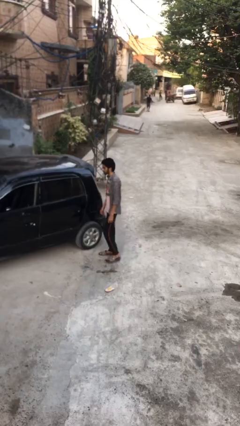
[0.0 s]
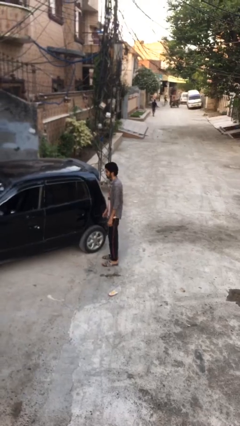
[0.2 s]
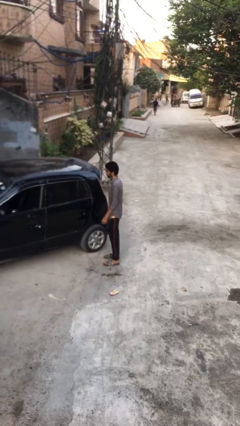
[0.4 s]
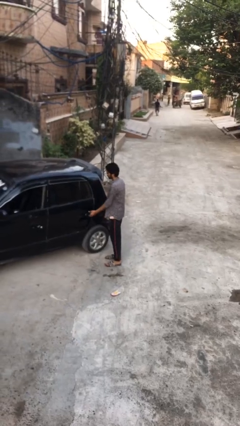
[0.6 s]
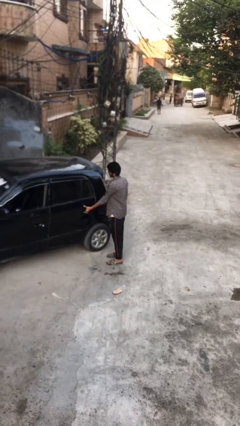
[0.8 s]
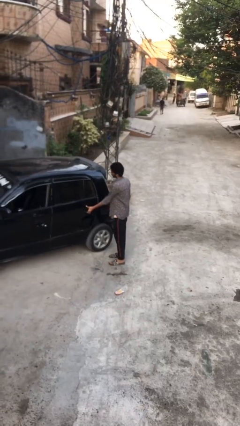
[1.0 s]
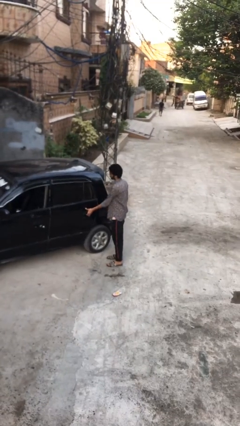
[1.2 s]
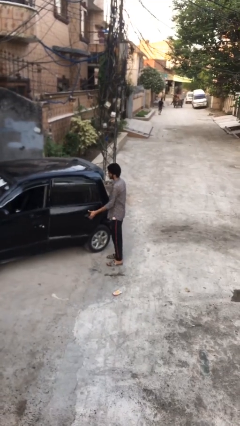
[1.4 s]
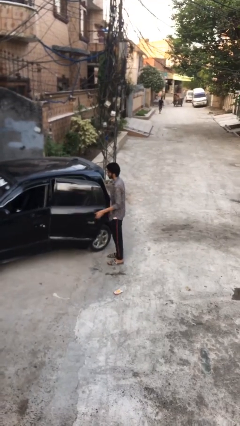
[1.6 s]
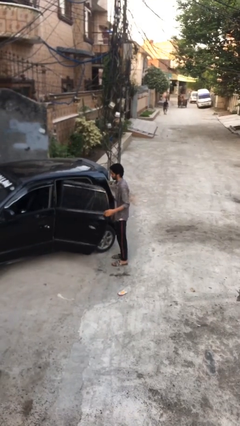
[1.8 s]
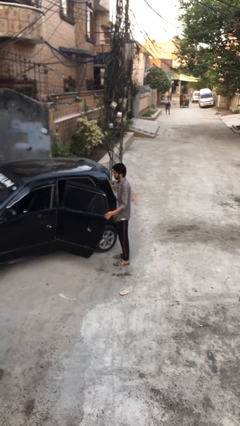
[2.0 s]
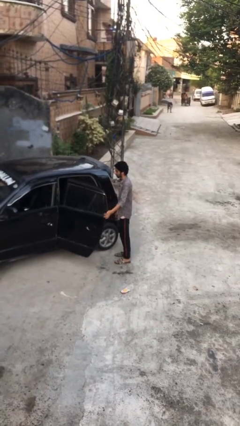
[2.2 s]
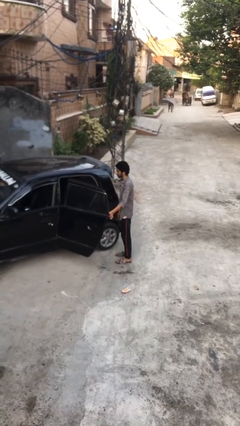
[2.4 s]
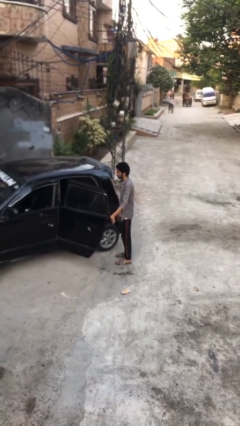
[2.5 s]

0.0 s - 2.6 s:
person opens car door

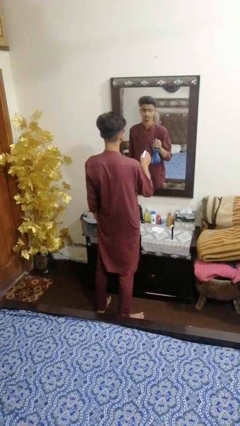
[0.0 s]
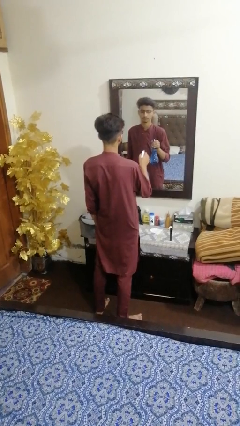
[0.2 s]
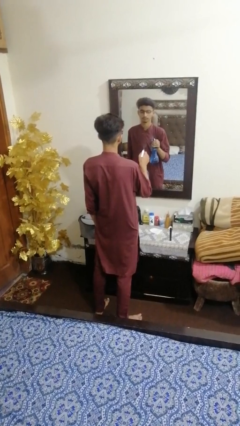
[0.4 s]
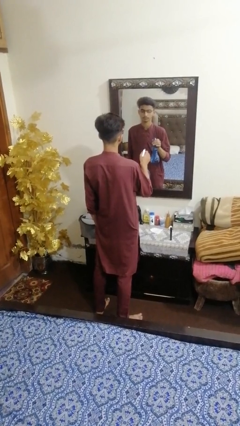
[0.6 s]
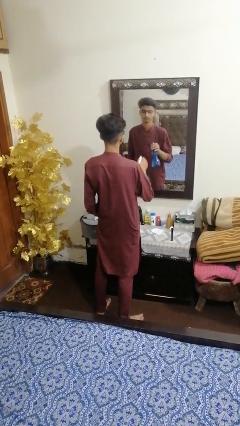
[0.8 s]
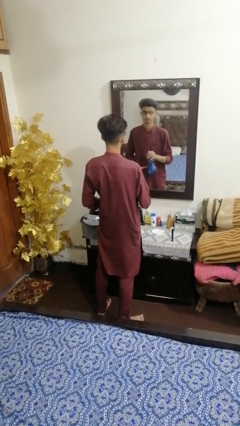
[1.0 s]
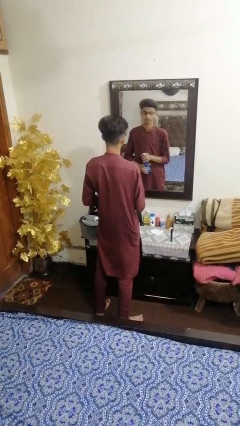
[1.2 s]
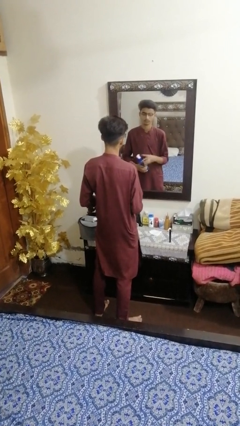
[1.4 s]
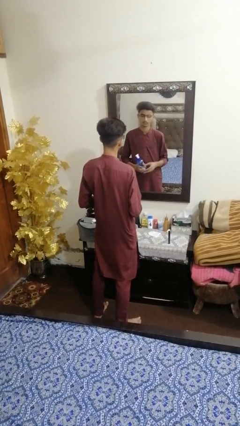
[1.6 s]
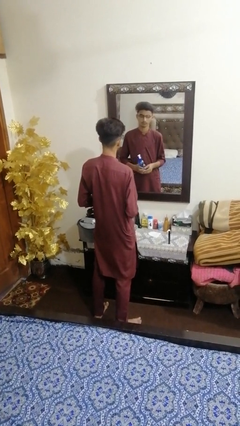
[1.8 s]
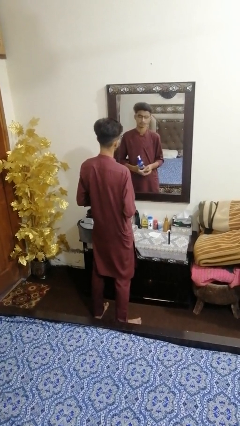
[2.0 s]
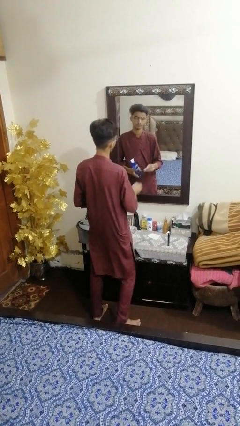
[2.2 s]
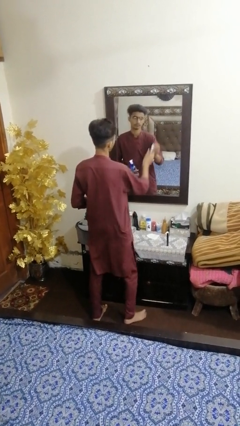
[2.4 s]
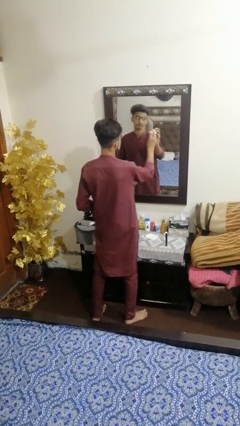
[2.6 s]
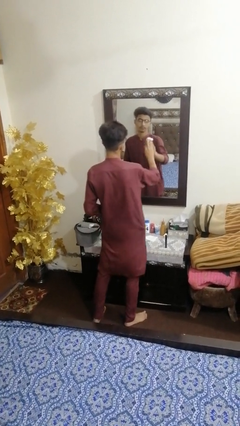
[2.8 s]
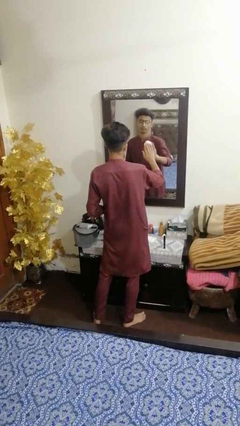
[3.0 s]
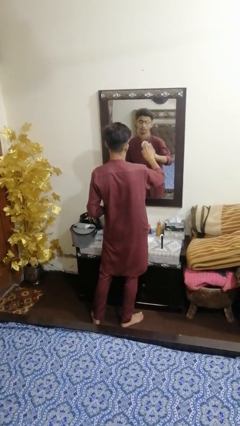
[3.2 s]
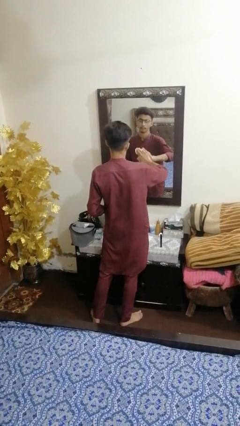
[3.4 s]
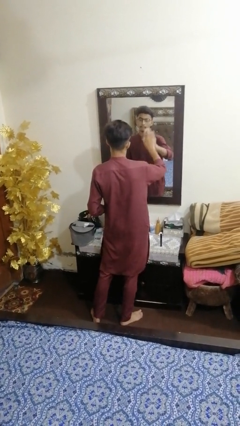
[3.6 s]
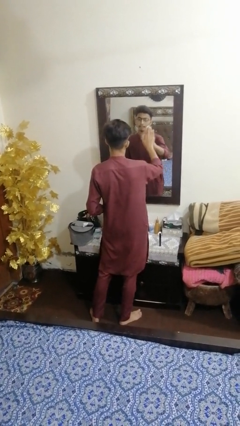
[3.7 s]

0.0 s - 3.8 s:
person sprays from bottle

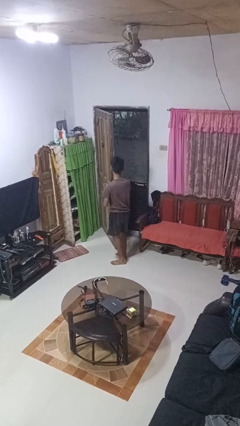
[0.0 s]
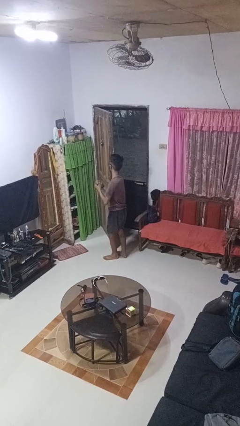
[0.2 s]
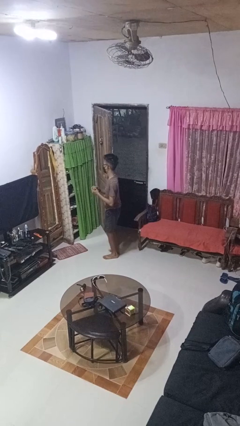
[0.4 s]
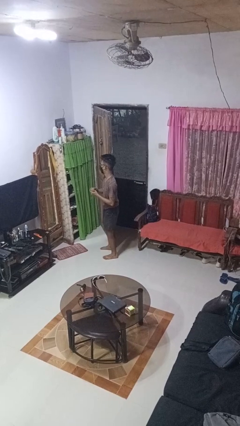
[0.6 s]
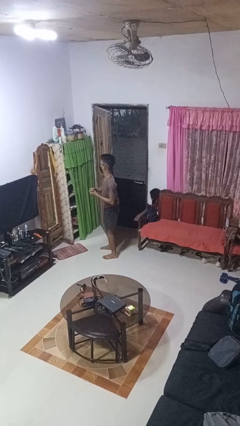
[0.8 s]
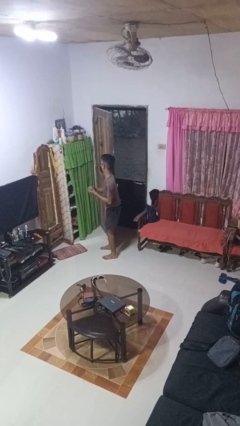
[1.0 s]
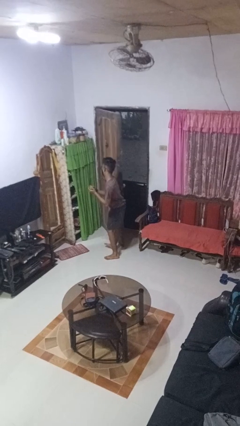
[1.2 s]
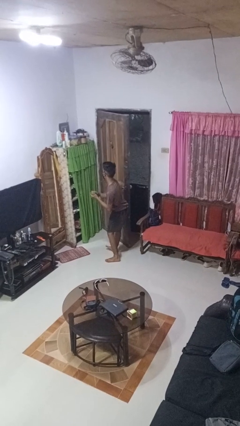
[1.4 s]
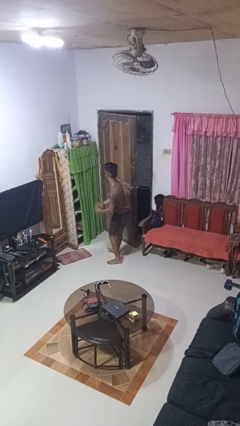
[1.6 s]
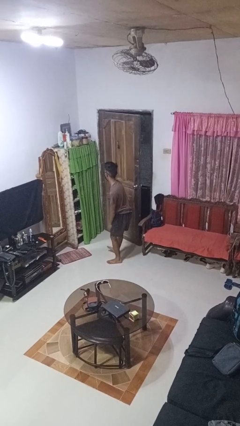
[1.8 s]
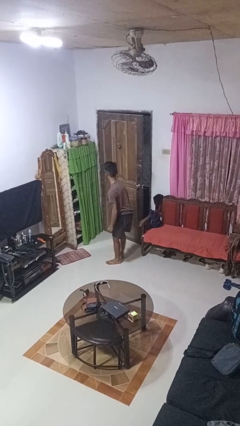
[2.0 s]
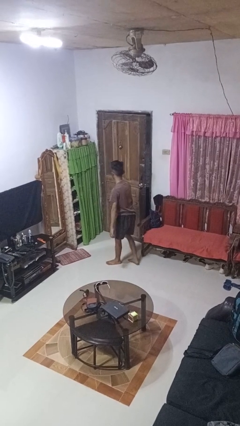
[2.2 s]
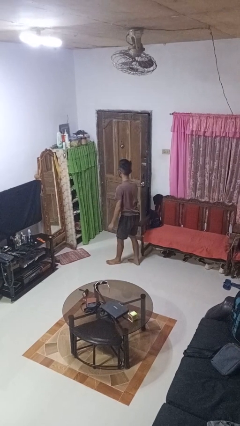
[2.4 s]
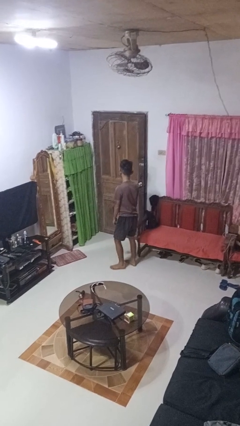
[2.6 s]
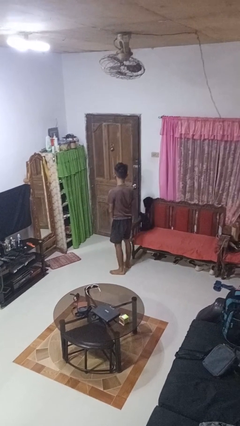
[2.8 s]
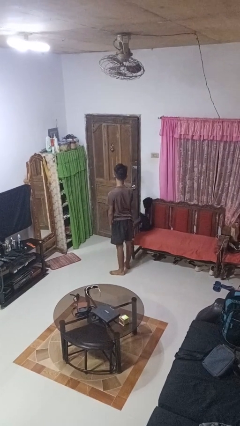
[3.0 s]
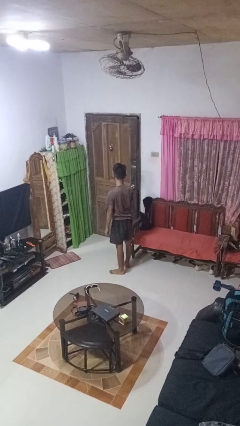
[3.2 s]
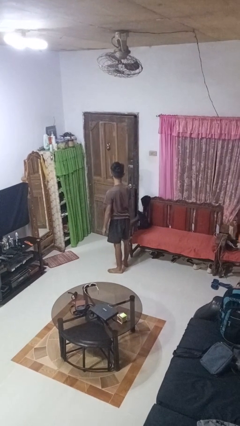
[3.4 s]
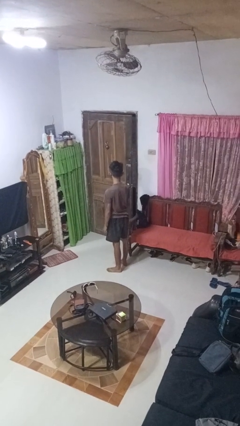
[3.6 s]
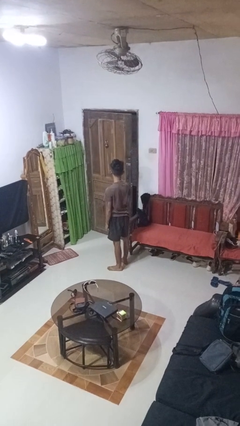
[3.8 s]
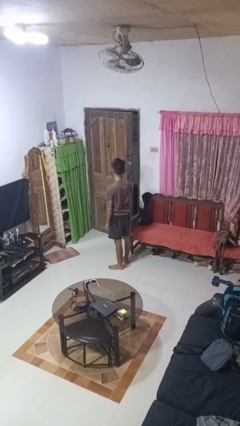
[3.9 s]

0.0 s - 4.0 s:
person closes door with hip

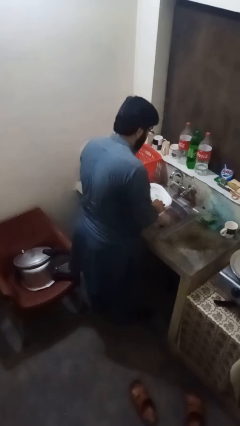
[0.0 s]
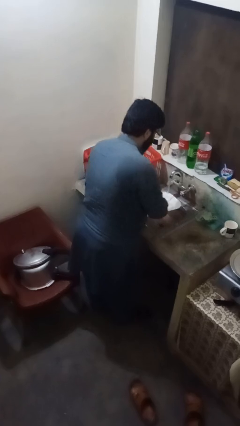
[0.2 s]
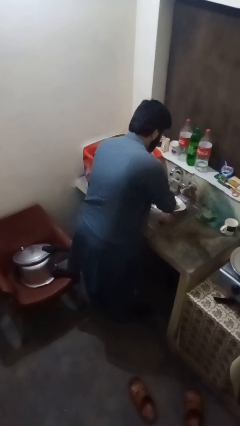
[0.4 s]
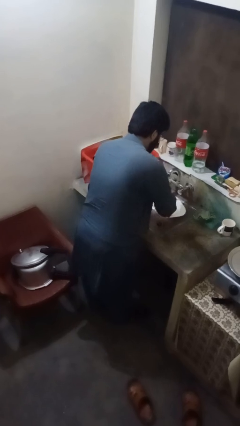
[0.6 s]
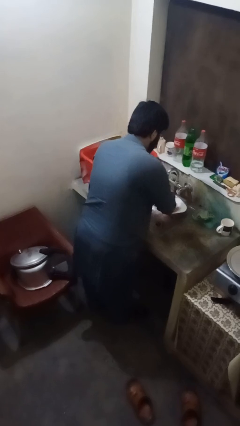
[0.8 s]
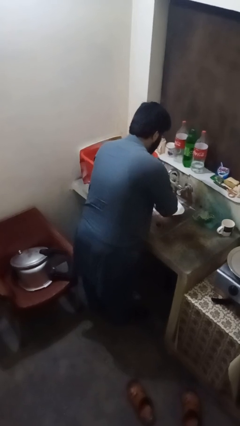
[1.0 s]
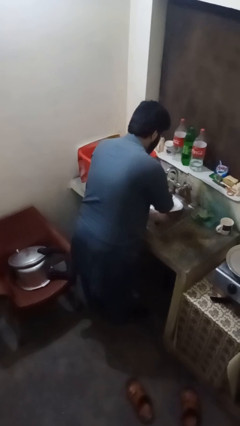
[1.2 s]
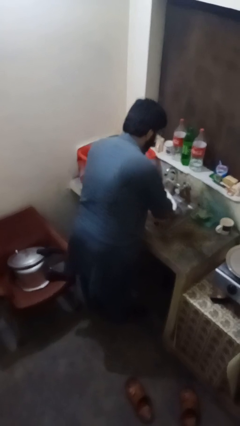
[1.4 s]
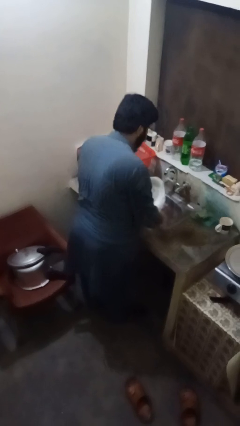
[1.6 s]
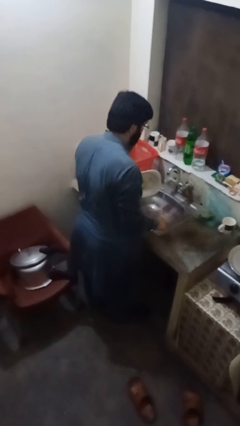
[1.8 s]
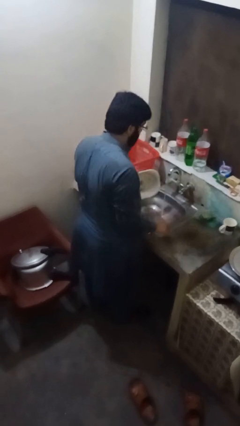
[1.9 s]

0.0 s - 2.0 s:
person washes dish

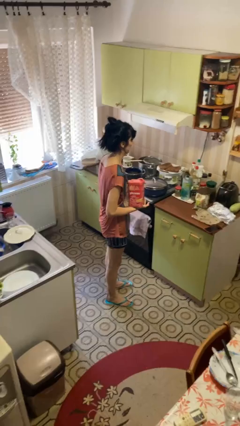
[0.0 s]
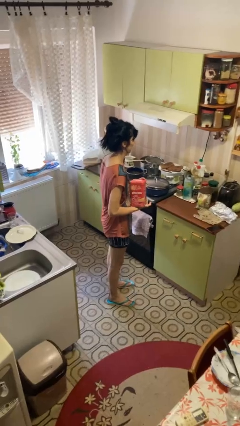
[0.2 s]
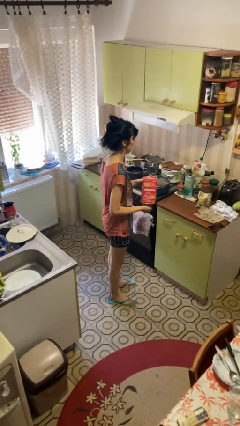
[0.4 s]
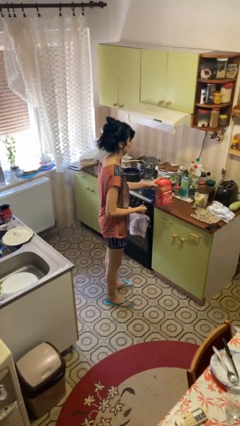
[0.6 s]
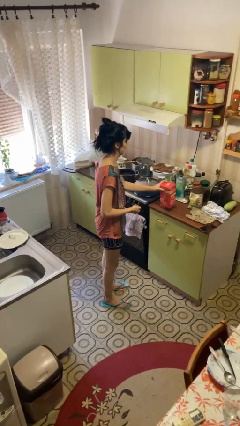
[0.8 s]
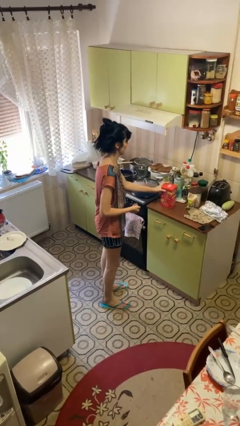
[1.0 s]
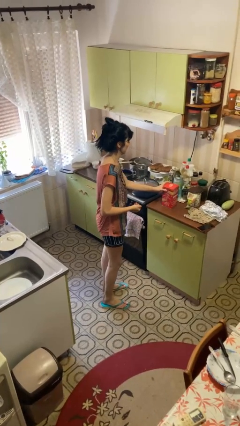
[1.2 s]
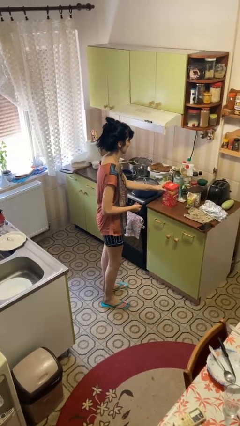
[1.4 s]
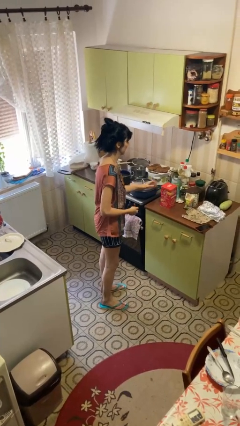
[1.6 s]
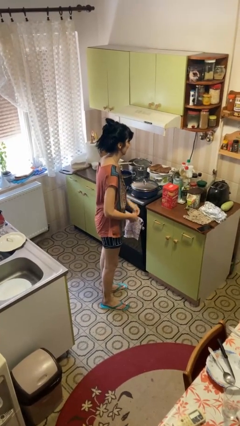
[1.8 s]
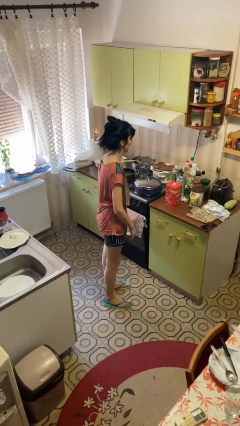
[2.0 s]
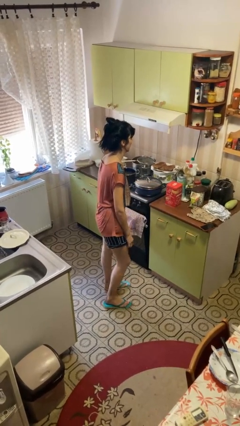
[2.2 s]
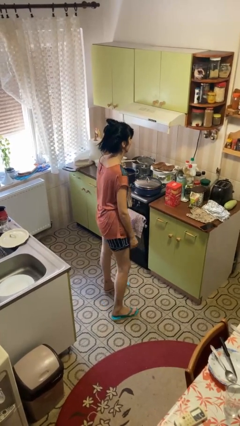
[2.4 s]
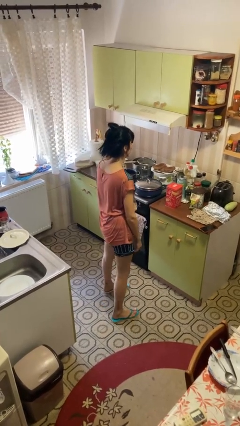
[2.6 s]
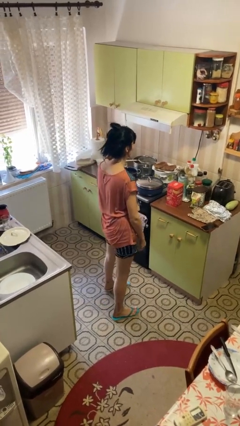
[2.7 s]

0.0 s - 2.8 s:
person puts down object on countertop

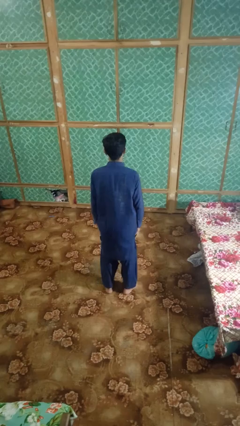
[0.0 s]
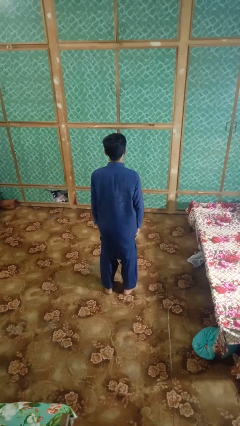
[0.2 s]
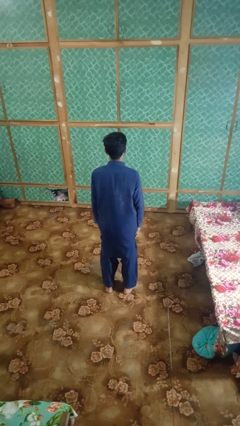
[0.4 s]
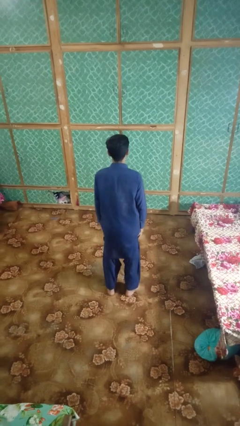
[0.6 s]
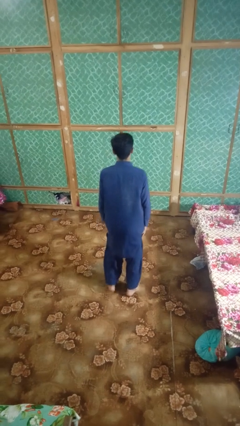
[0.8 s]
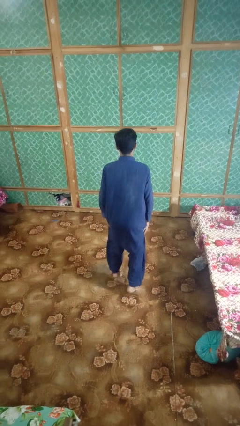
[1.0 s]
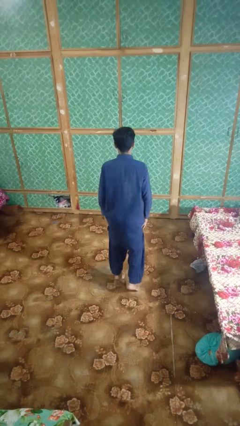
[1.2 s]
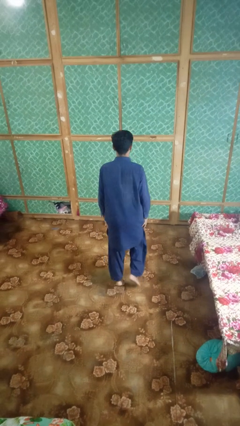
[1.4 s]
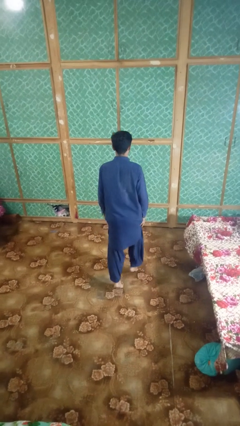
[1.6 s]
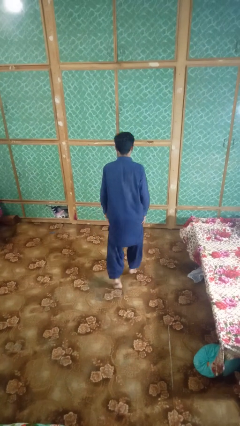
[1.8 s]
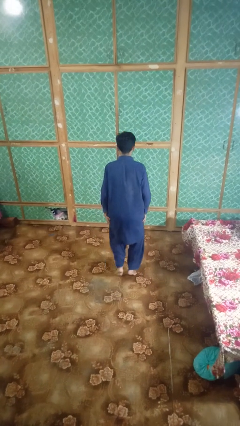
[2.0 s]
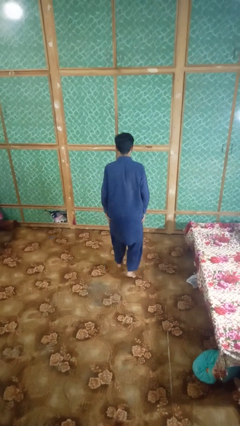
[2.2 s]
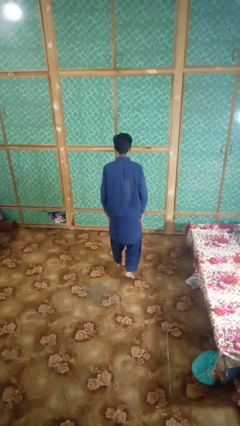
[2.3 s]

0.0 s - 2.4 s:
person walks tiptoe
